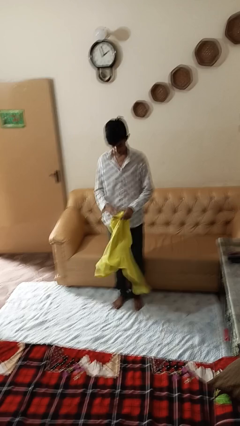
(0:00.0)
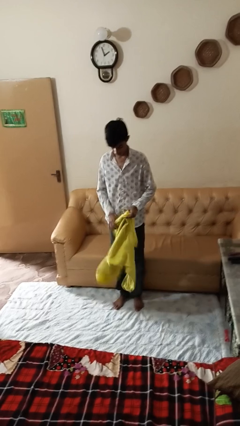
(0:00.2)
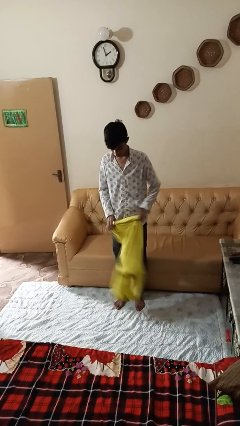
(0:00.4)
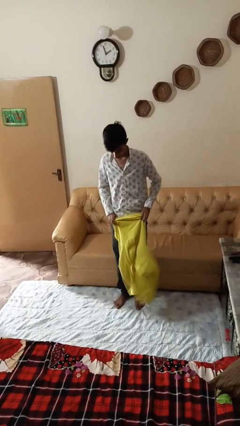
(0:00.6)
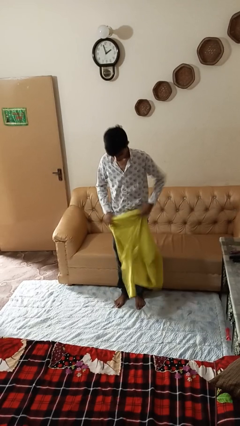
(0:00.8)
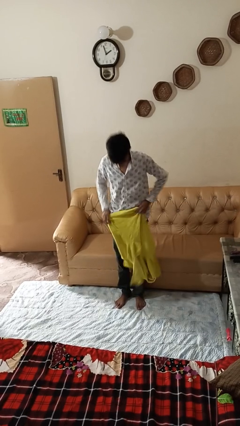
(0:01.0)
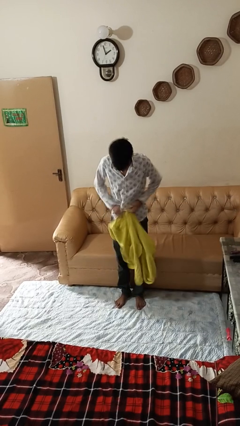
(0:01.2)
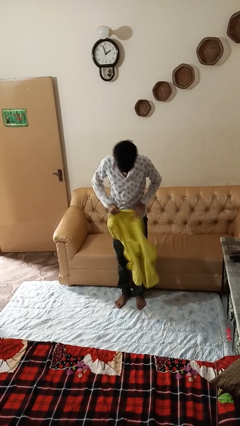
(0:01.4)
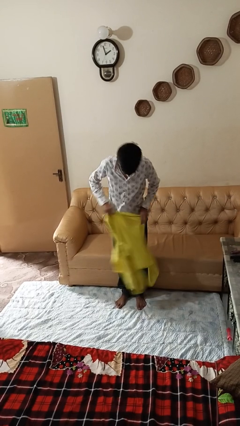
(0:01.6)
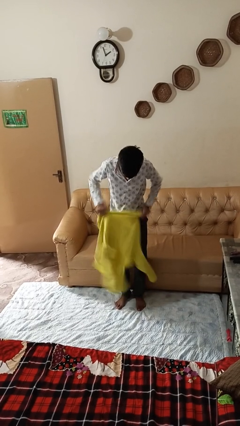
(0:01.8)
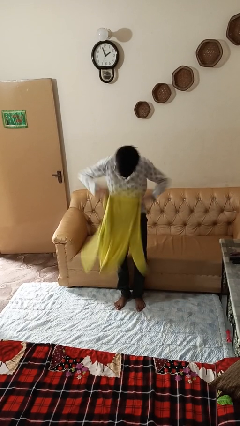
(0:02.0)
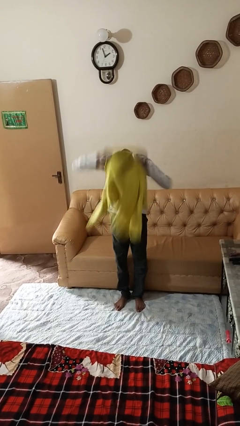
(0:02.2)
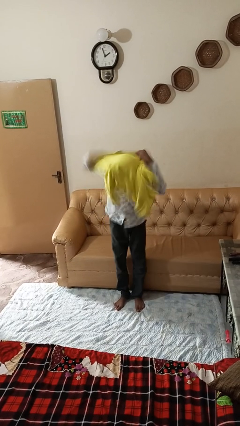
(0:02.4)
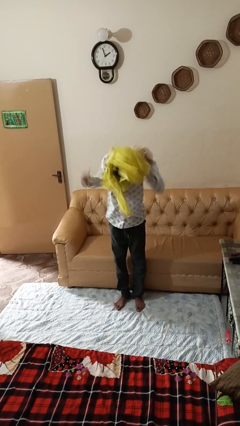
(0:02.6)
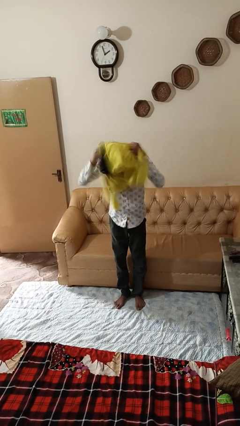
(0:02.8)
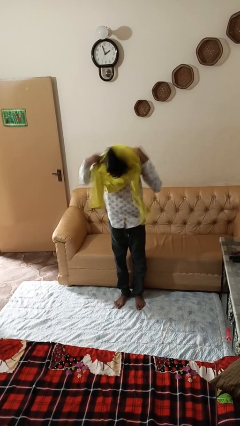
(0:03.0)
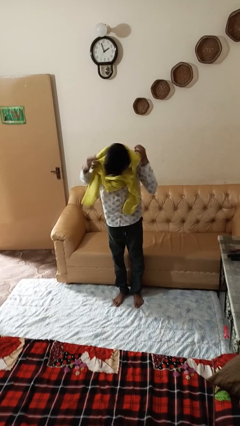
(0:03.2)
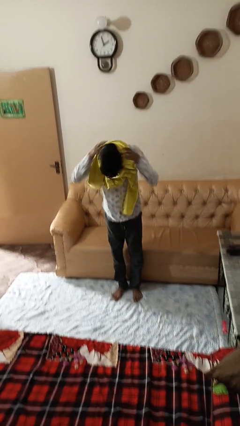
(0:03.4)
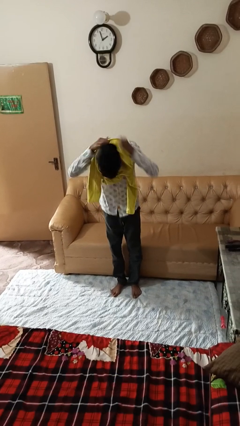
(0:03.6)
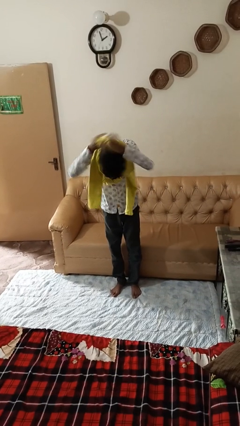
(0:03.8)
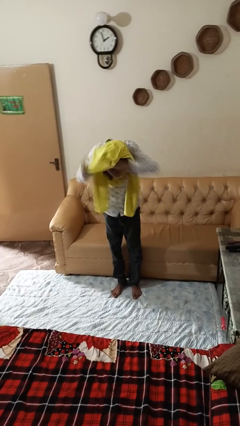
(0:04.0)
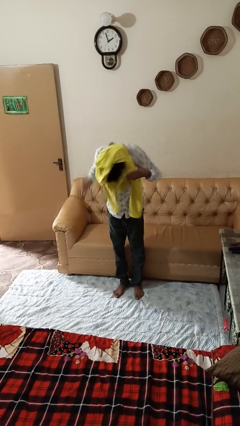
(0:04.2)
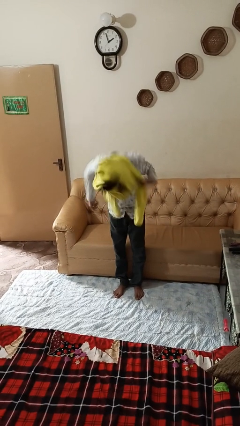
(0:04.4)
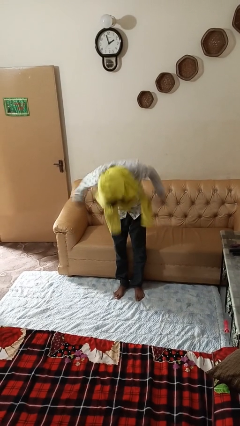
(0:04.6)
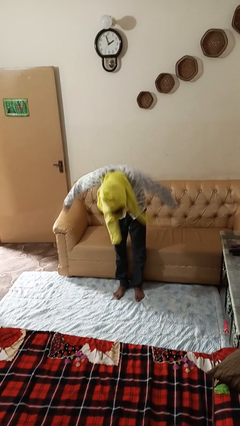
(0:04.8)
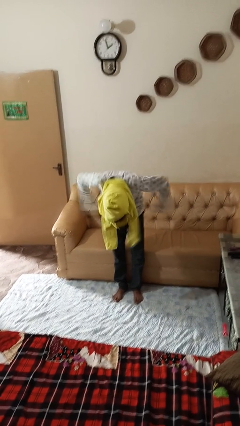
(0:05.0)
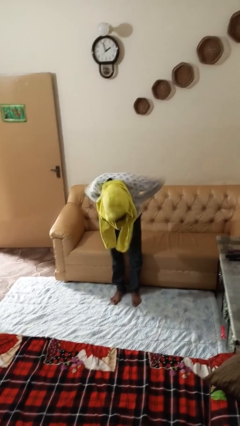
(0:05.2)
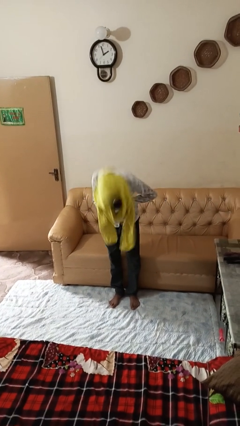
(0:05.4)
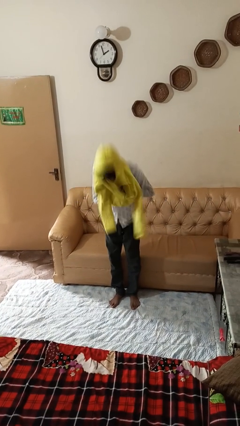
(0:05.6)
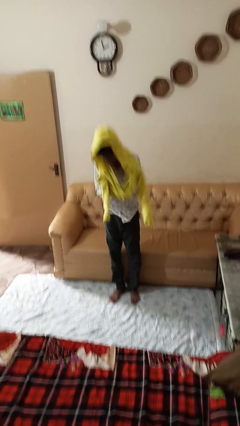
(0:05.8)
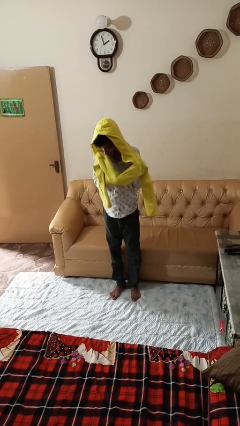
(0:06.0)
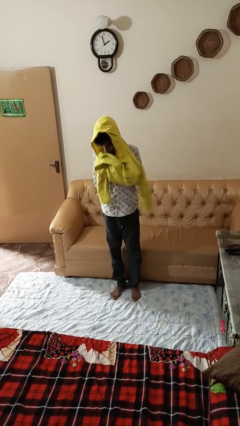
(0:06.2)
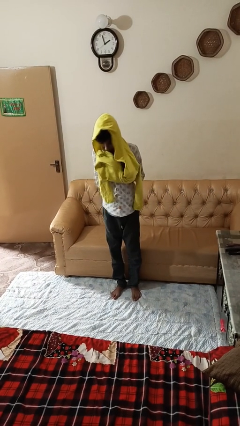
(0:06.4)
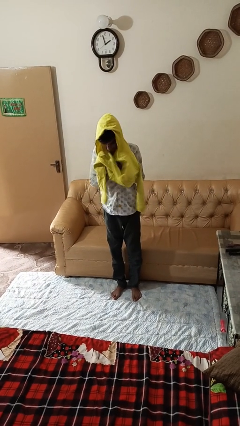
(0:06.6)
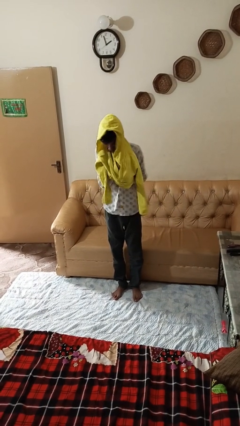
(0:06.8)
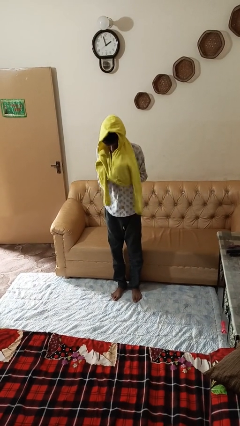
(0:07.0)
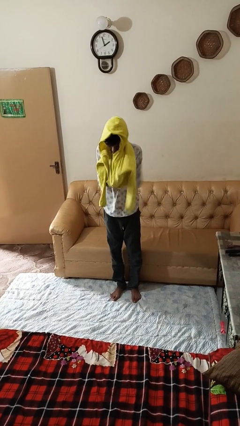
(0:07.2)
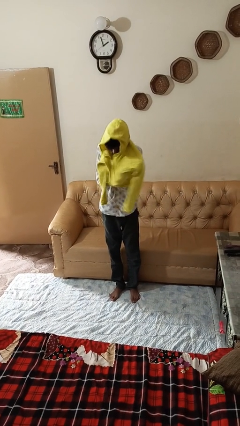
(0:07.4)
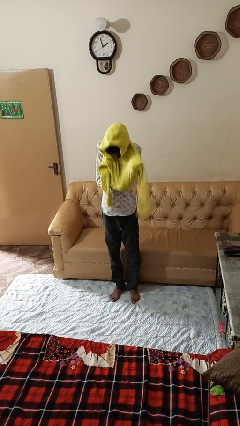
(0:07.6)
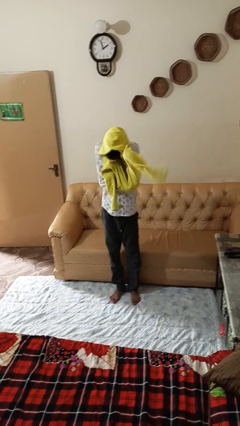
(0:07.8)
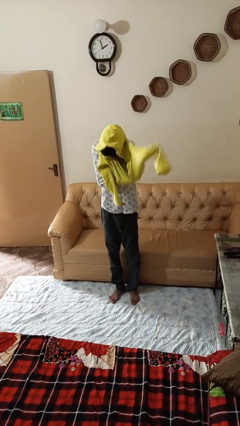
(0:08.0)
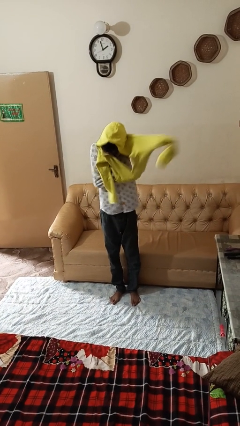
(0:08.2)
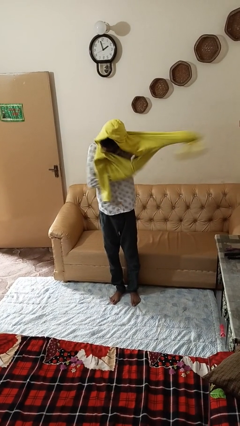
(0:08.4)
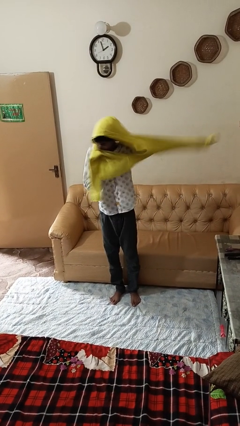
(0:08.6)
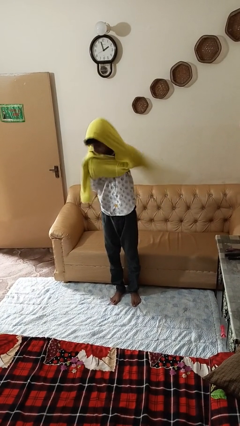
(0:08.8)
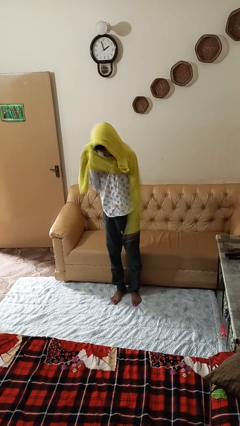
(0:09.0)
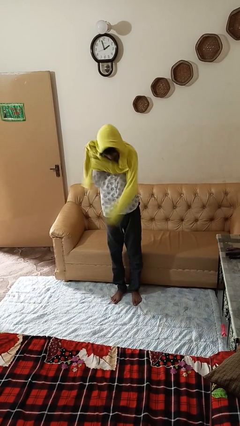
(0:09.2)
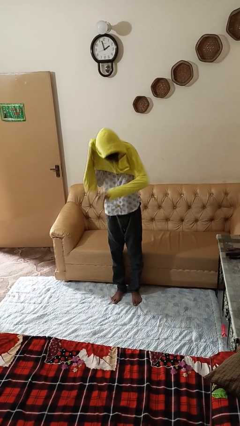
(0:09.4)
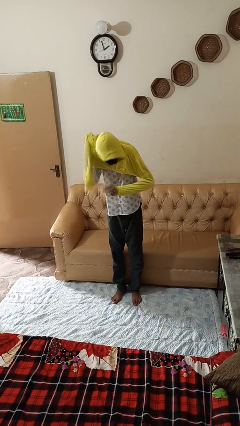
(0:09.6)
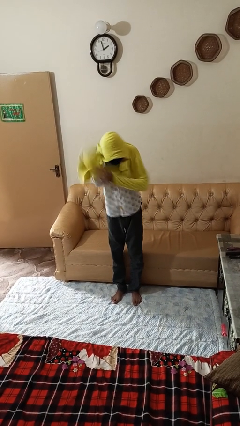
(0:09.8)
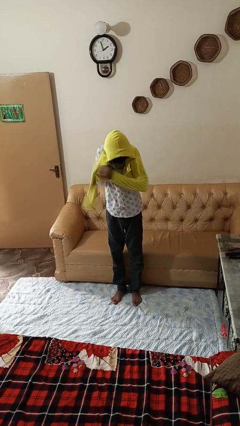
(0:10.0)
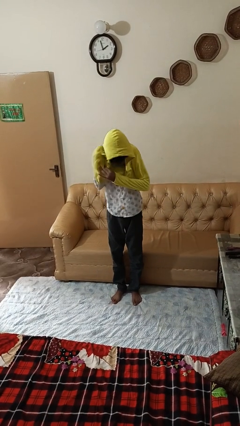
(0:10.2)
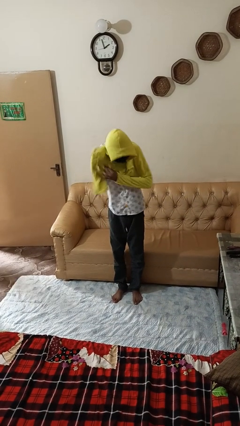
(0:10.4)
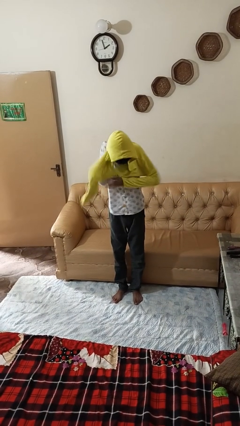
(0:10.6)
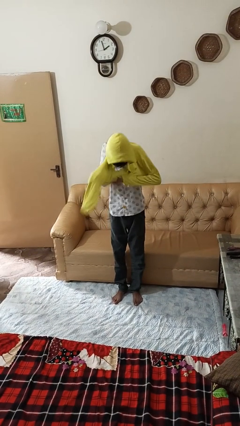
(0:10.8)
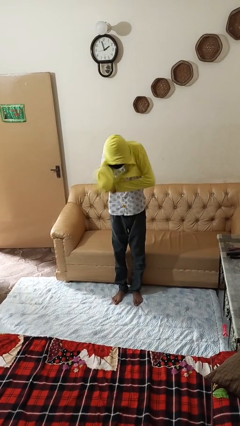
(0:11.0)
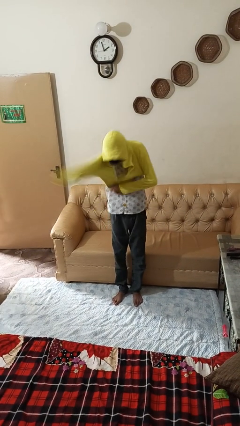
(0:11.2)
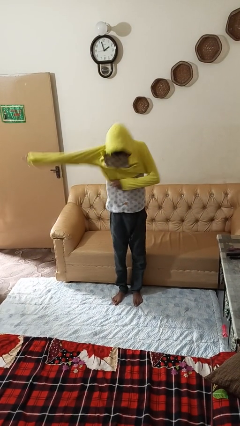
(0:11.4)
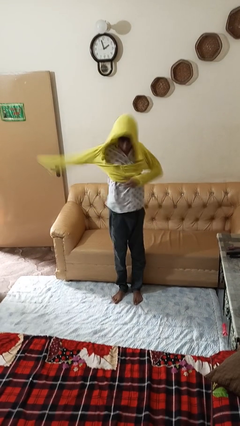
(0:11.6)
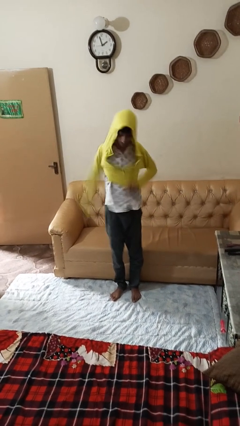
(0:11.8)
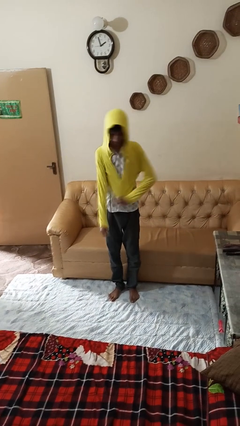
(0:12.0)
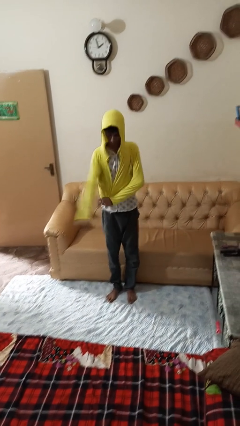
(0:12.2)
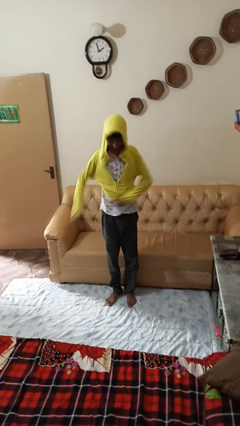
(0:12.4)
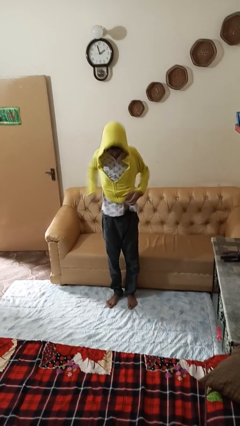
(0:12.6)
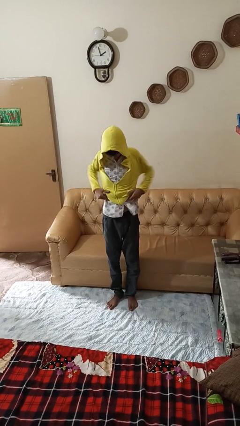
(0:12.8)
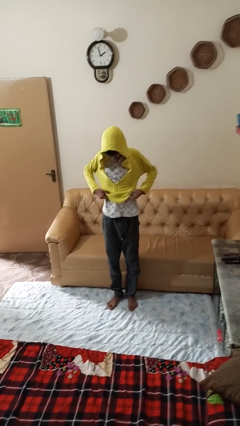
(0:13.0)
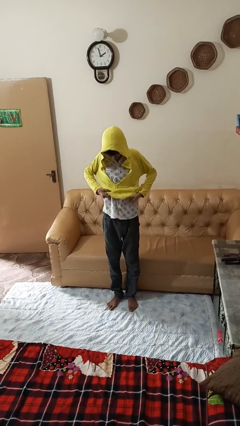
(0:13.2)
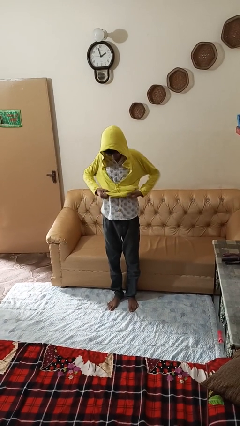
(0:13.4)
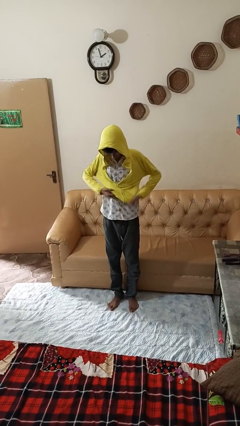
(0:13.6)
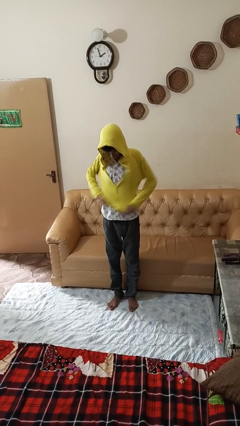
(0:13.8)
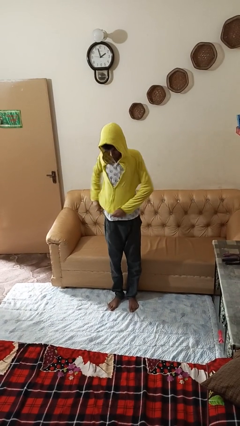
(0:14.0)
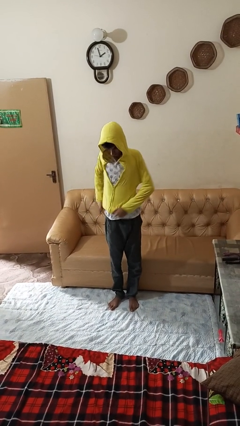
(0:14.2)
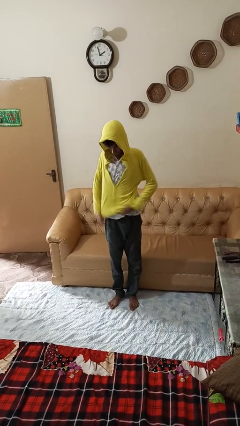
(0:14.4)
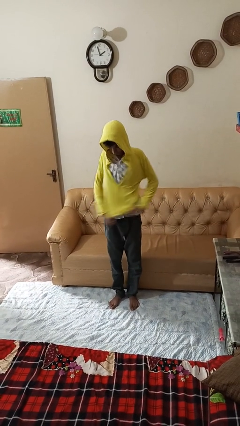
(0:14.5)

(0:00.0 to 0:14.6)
person puts on hoodie

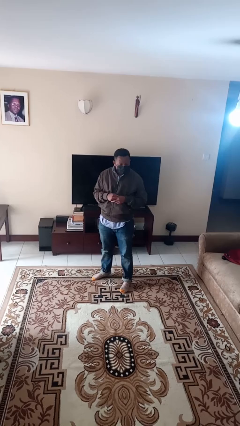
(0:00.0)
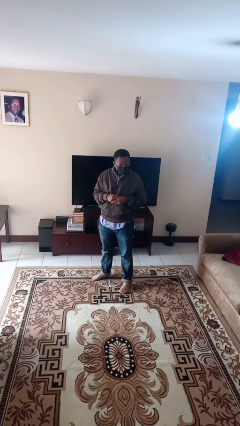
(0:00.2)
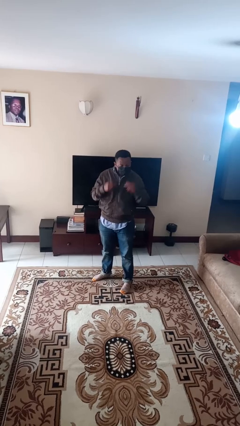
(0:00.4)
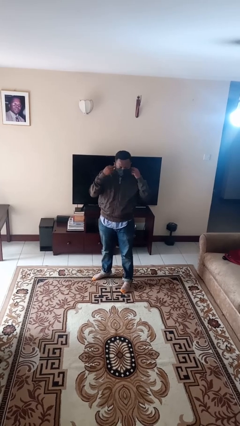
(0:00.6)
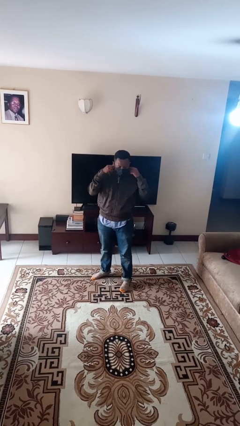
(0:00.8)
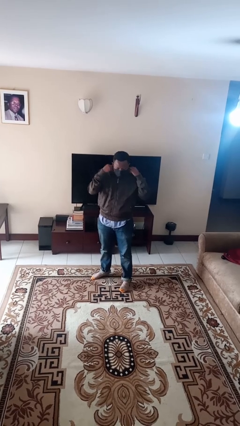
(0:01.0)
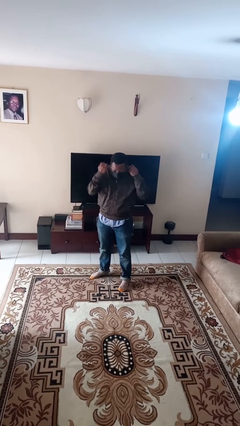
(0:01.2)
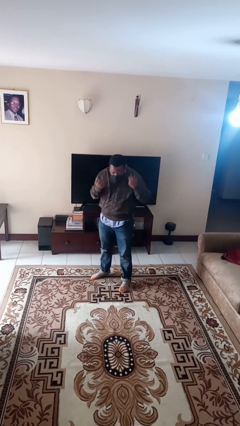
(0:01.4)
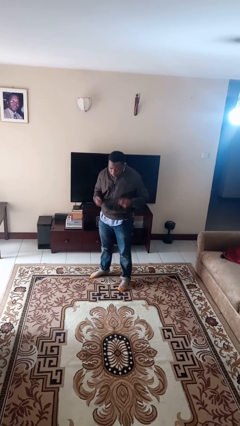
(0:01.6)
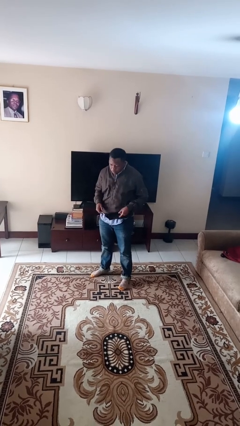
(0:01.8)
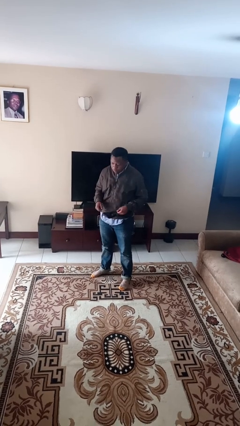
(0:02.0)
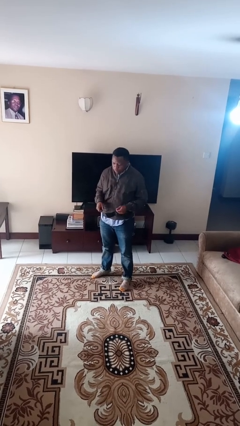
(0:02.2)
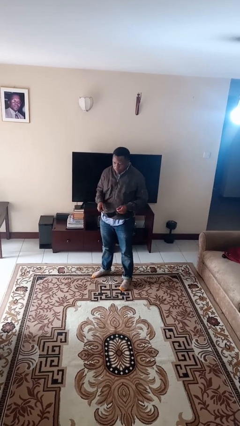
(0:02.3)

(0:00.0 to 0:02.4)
person takes off facemask

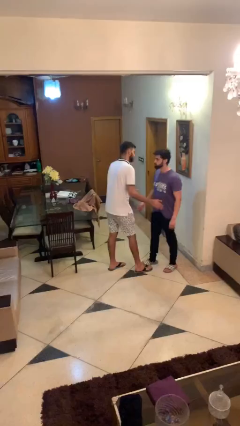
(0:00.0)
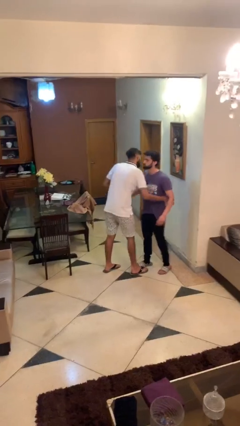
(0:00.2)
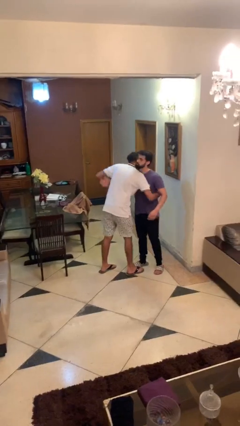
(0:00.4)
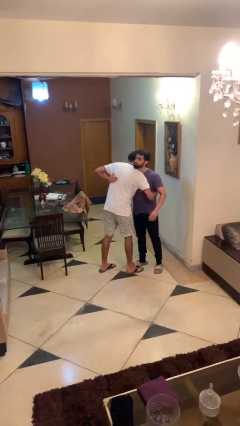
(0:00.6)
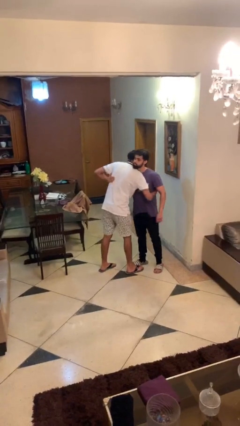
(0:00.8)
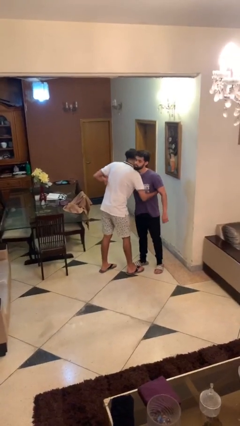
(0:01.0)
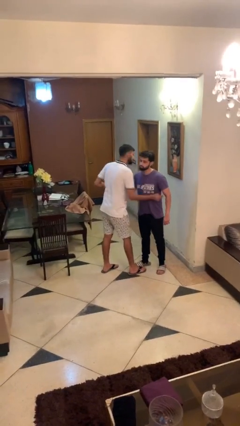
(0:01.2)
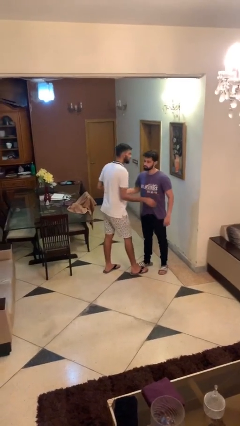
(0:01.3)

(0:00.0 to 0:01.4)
person embraces person
